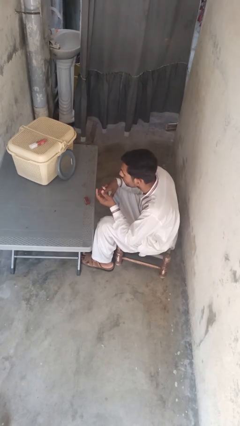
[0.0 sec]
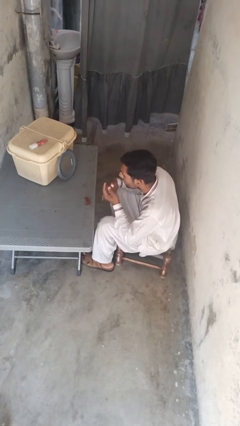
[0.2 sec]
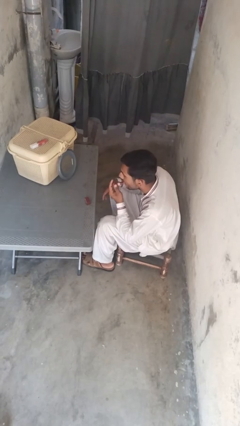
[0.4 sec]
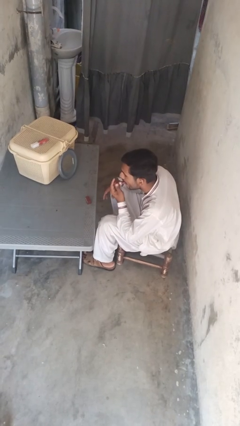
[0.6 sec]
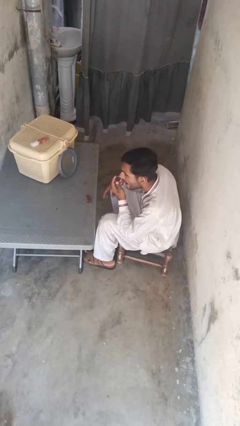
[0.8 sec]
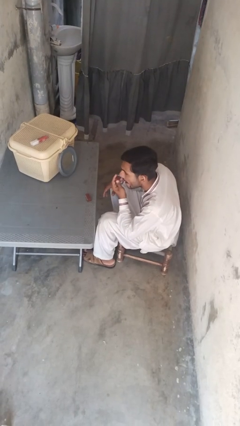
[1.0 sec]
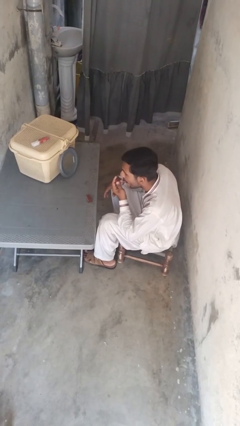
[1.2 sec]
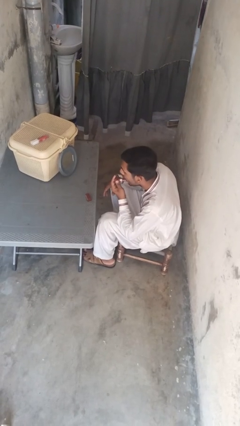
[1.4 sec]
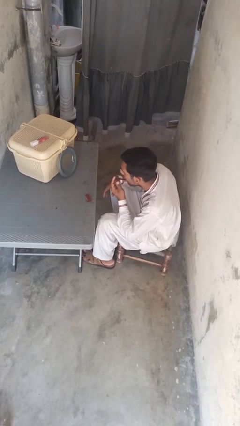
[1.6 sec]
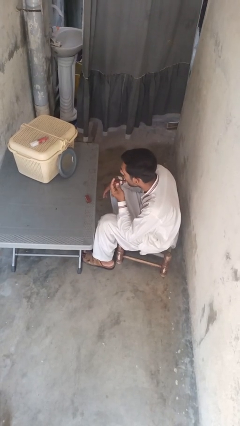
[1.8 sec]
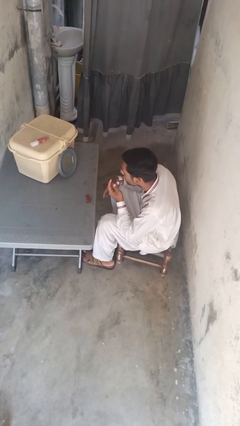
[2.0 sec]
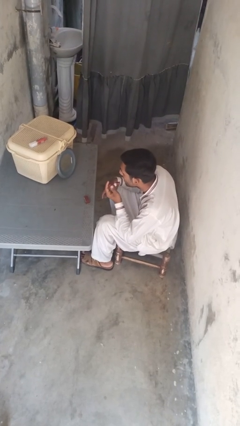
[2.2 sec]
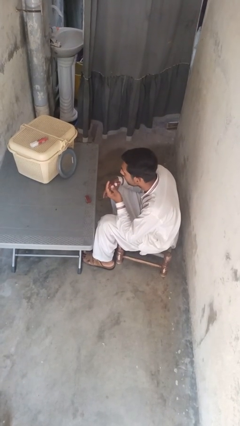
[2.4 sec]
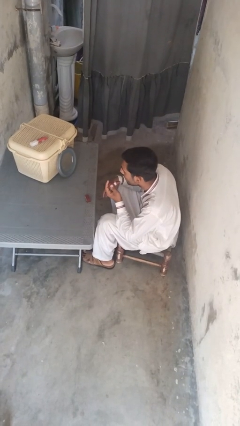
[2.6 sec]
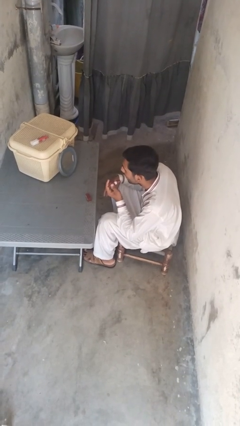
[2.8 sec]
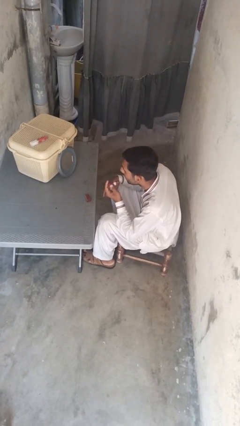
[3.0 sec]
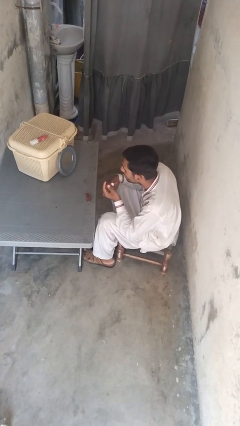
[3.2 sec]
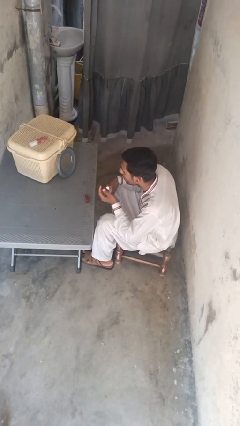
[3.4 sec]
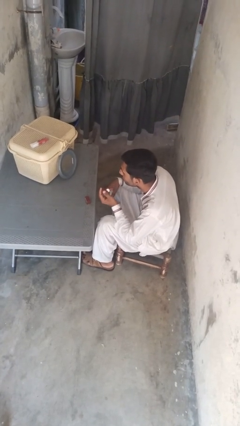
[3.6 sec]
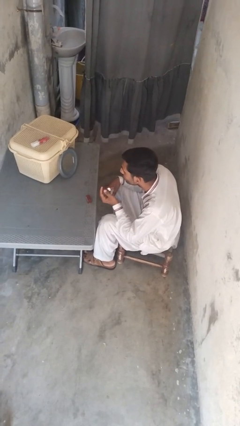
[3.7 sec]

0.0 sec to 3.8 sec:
person applies lip makeup

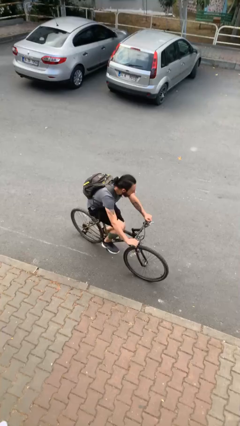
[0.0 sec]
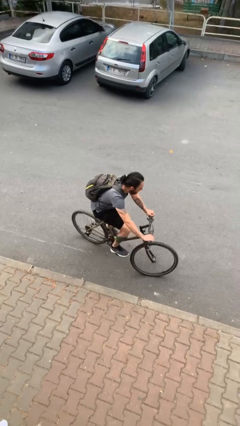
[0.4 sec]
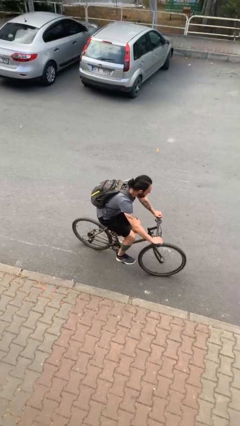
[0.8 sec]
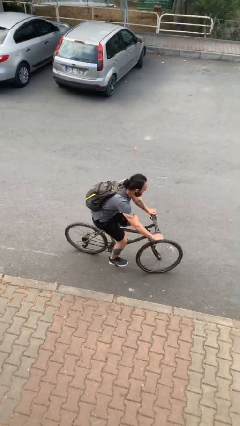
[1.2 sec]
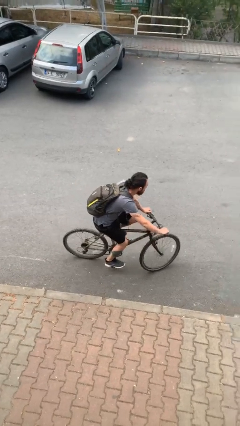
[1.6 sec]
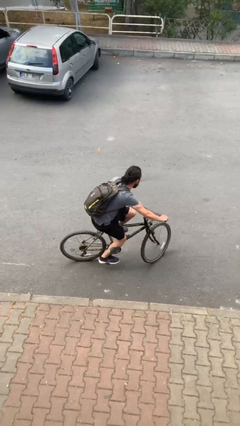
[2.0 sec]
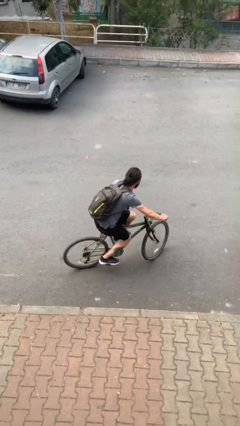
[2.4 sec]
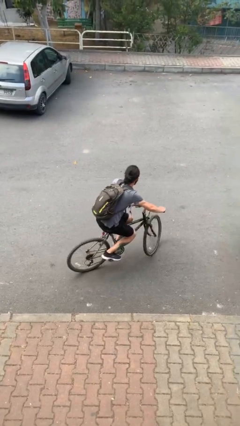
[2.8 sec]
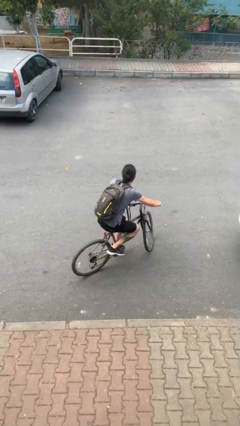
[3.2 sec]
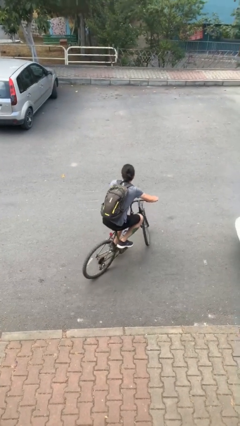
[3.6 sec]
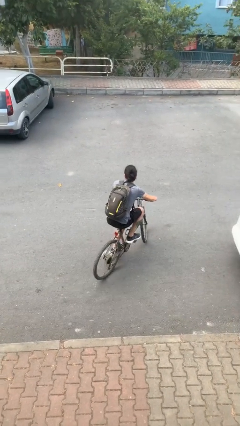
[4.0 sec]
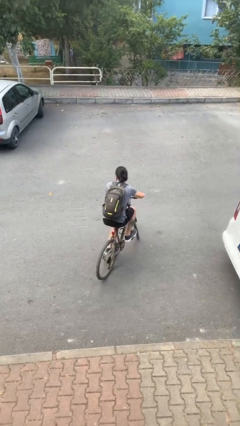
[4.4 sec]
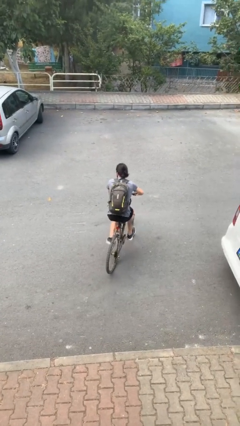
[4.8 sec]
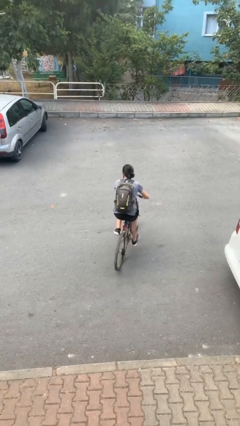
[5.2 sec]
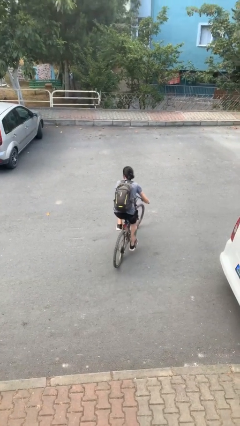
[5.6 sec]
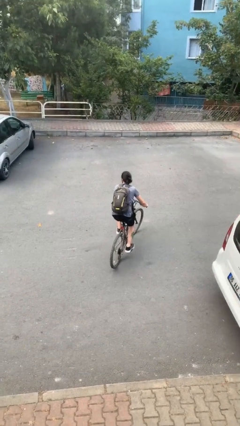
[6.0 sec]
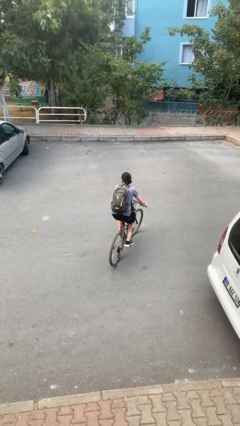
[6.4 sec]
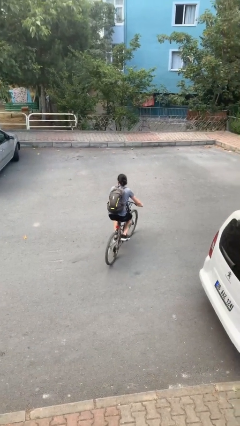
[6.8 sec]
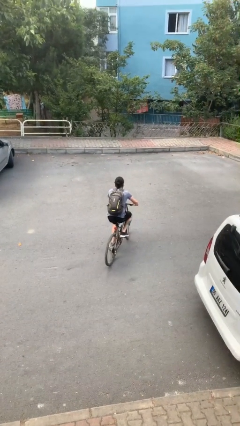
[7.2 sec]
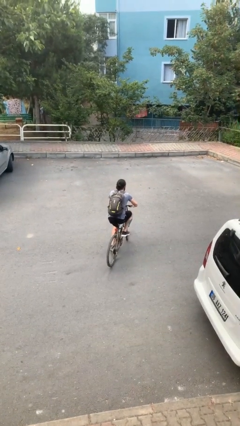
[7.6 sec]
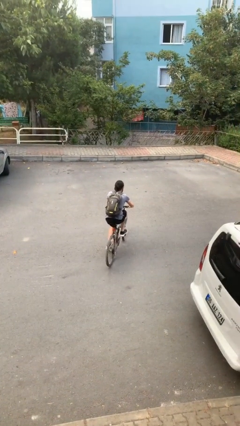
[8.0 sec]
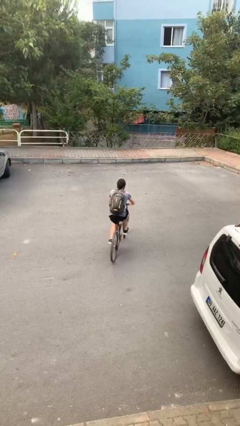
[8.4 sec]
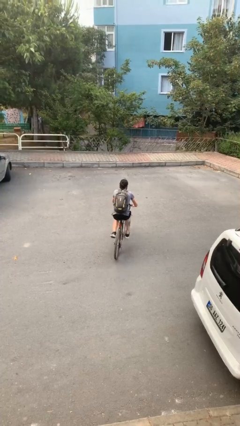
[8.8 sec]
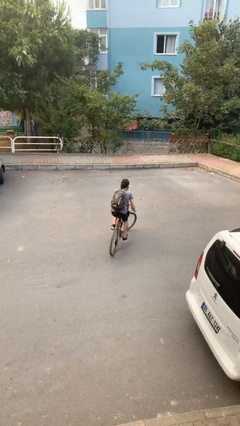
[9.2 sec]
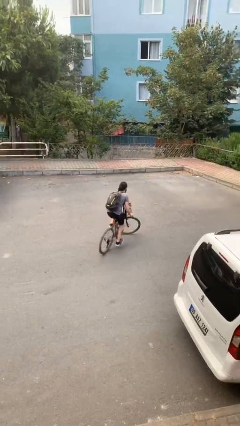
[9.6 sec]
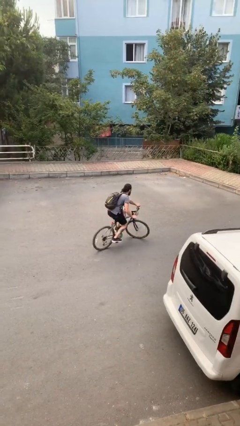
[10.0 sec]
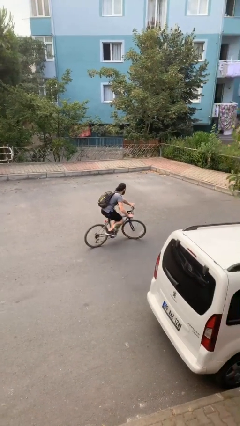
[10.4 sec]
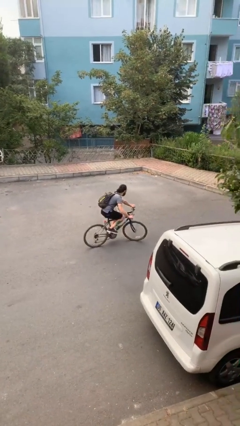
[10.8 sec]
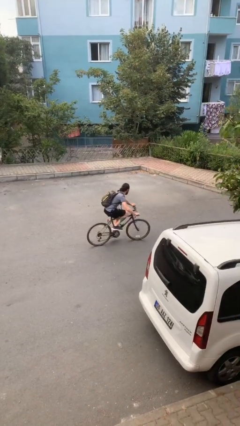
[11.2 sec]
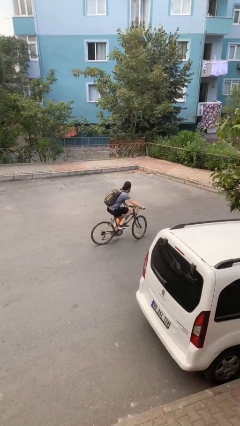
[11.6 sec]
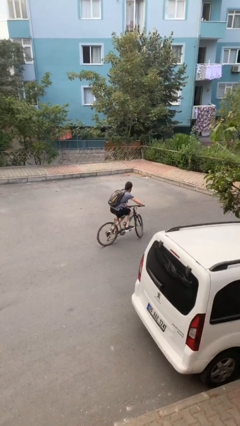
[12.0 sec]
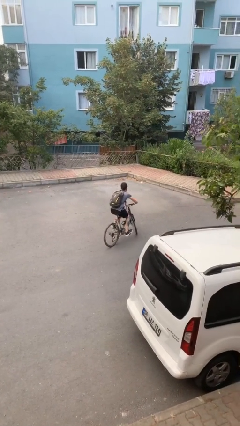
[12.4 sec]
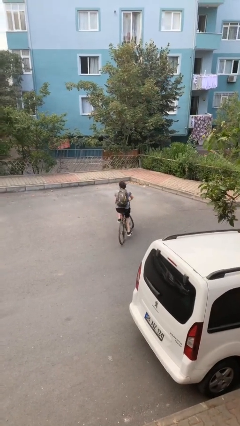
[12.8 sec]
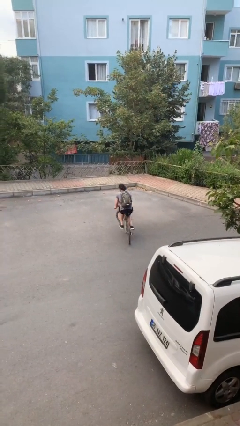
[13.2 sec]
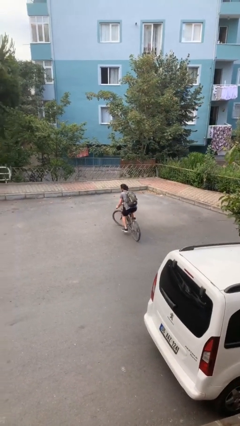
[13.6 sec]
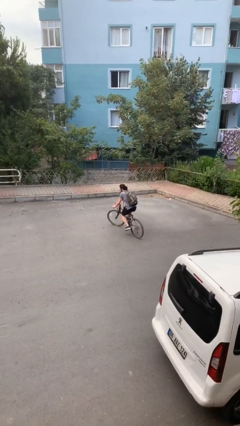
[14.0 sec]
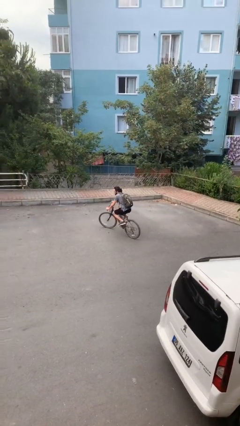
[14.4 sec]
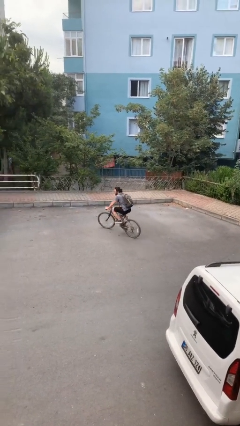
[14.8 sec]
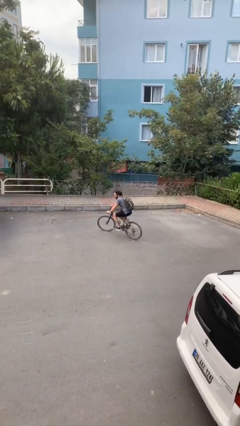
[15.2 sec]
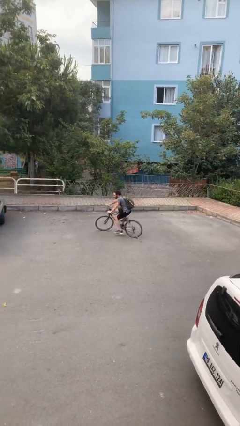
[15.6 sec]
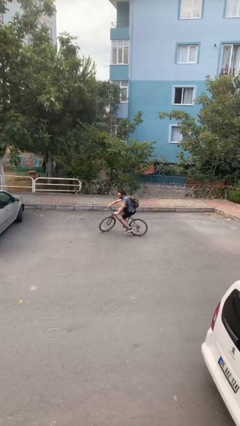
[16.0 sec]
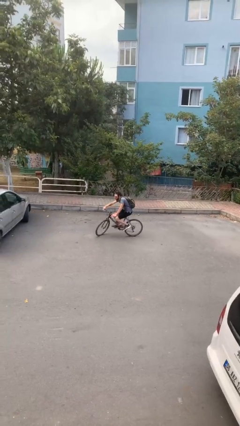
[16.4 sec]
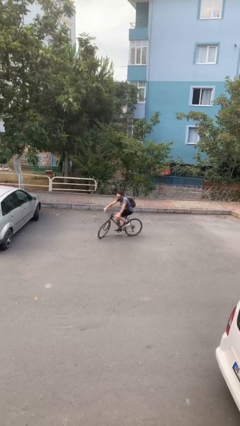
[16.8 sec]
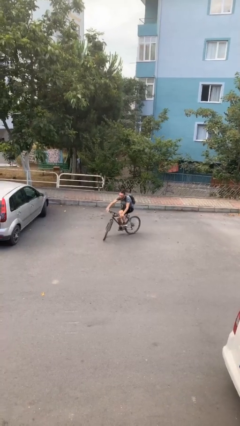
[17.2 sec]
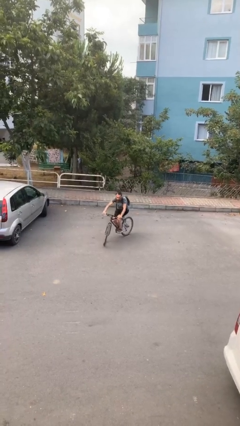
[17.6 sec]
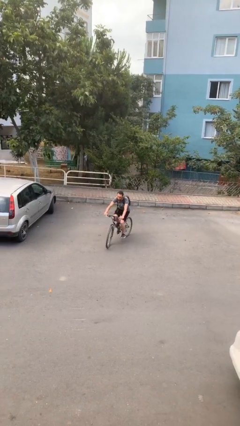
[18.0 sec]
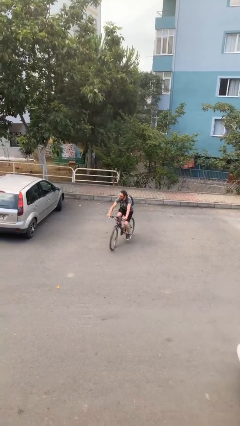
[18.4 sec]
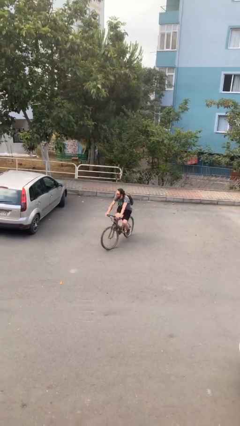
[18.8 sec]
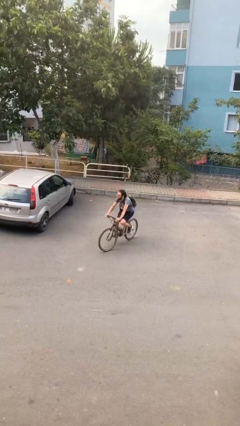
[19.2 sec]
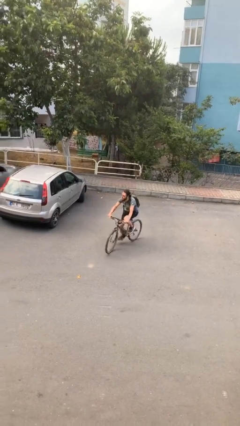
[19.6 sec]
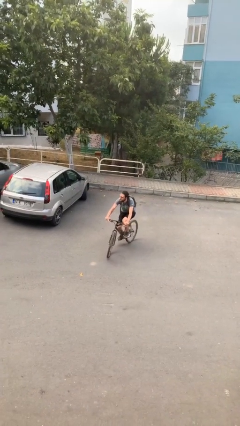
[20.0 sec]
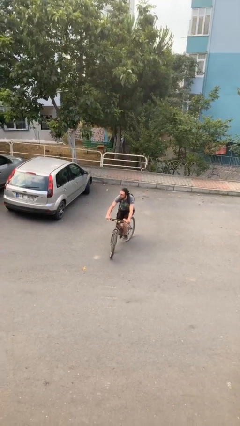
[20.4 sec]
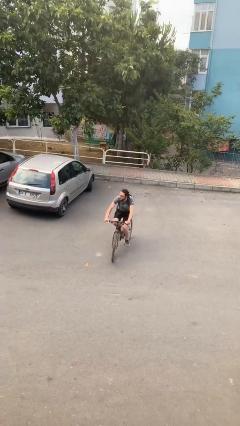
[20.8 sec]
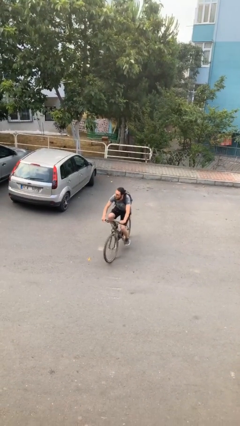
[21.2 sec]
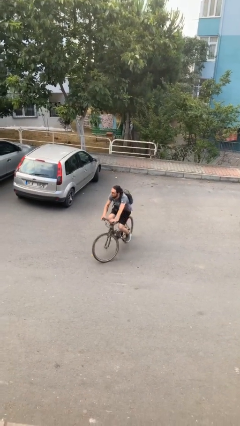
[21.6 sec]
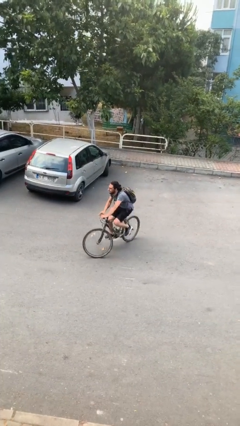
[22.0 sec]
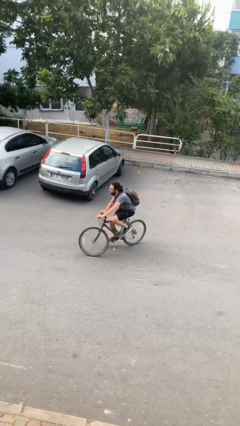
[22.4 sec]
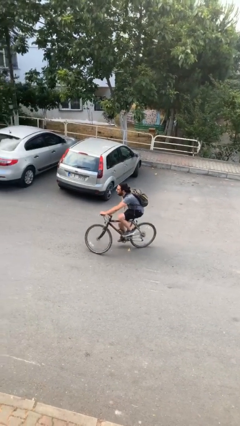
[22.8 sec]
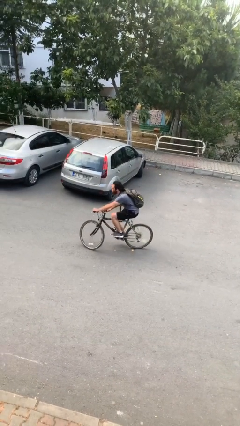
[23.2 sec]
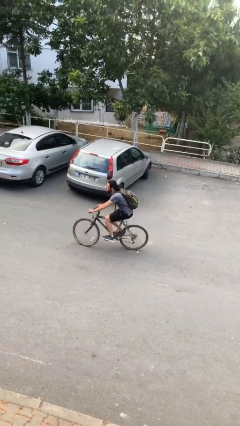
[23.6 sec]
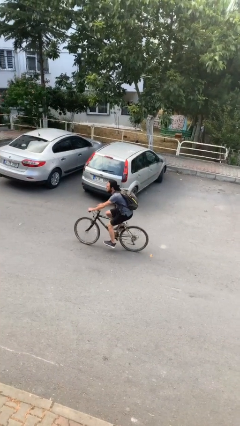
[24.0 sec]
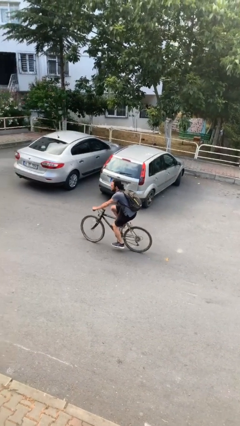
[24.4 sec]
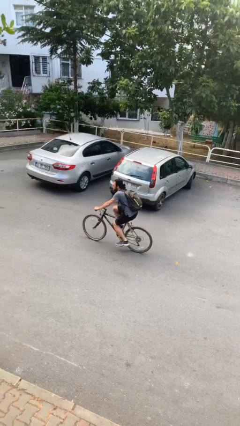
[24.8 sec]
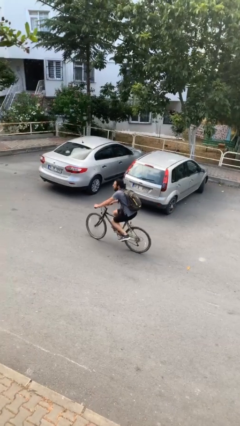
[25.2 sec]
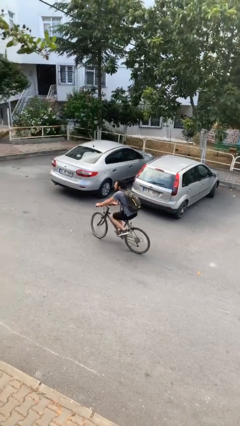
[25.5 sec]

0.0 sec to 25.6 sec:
person rides bicycle

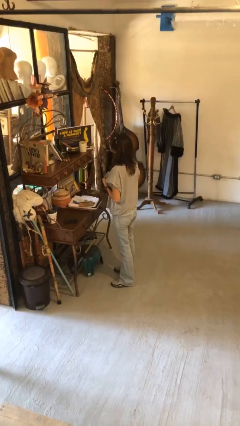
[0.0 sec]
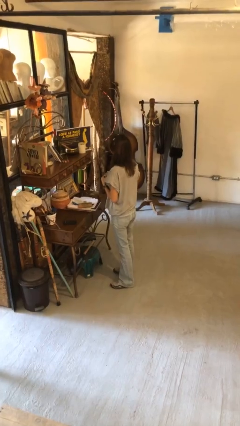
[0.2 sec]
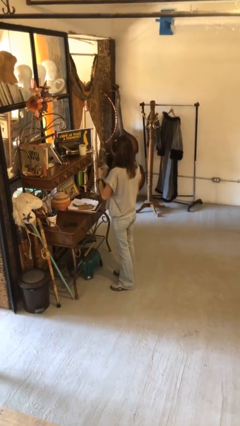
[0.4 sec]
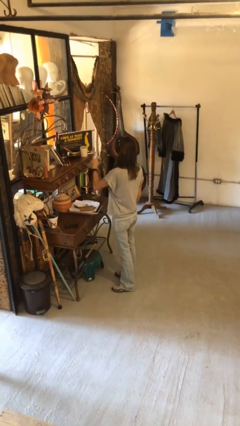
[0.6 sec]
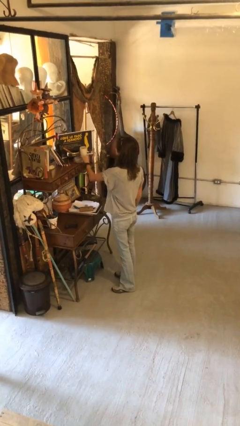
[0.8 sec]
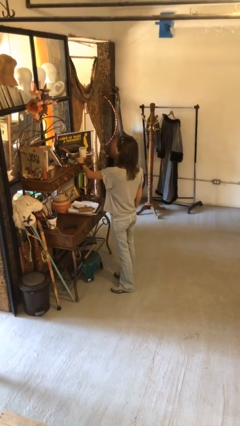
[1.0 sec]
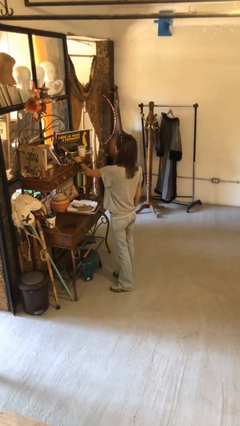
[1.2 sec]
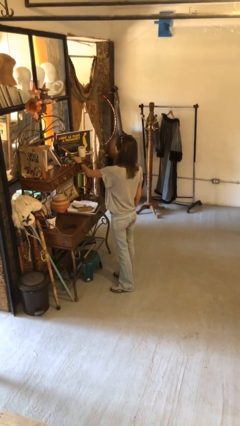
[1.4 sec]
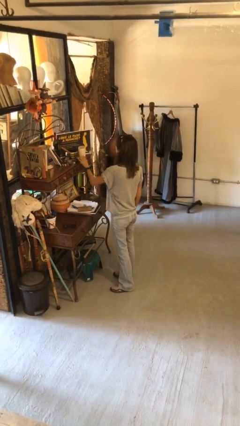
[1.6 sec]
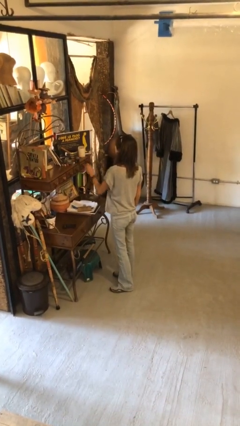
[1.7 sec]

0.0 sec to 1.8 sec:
person puts down object on countertop
